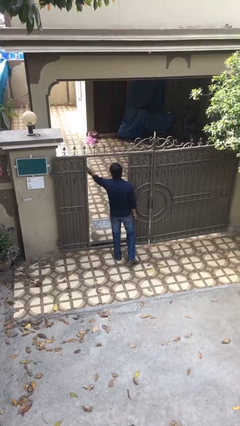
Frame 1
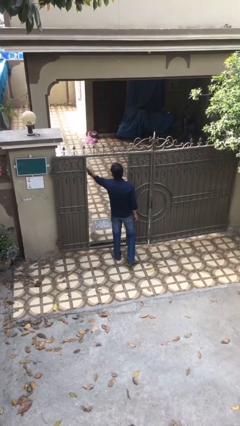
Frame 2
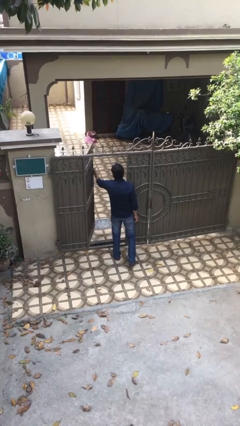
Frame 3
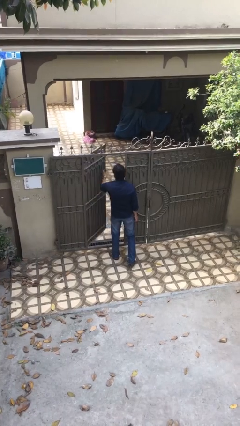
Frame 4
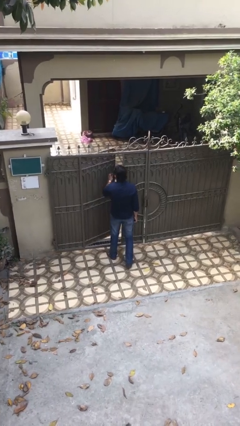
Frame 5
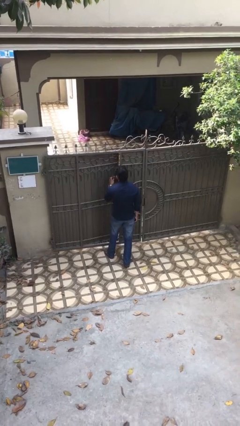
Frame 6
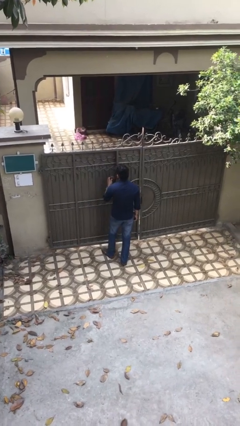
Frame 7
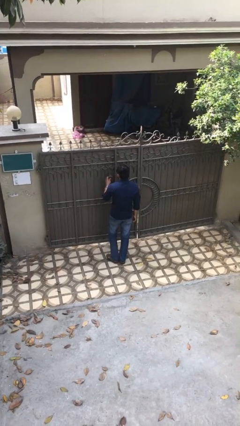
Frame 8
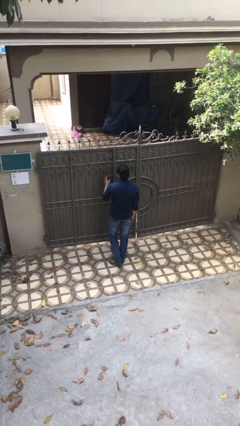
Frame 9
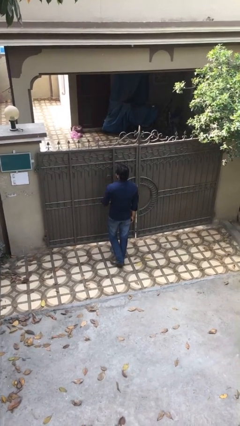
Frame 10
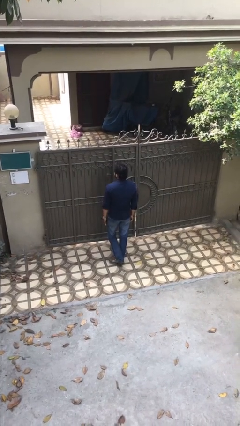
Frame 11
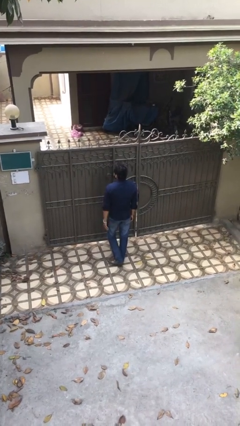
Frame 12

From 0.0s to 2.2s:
person closes facility door

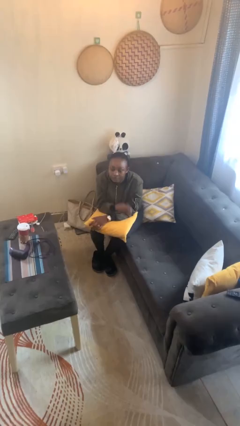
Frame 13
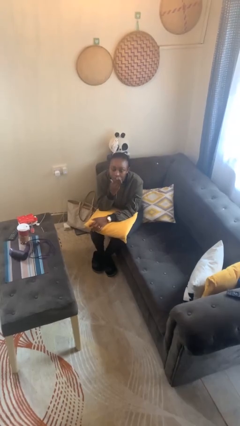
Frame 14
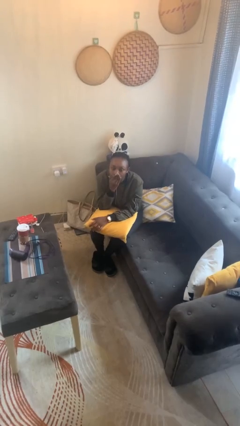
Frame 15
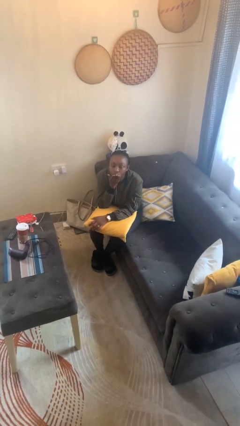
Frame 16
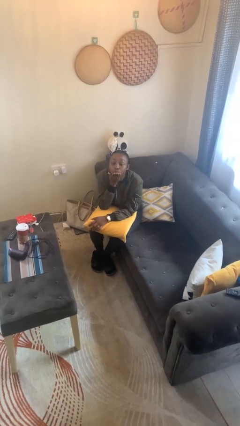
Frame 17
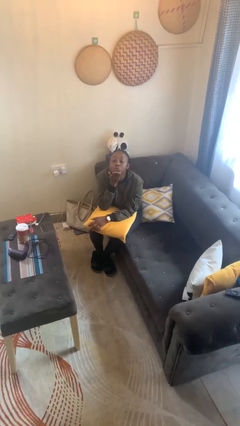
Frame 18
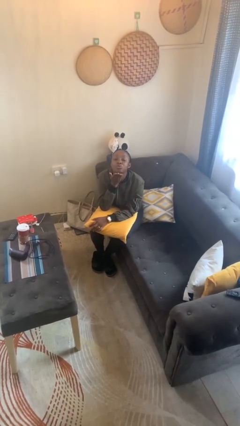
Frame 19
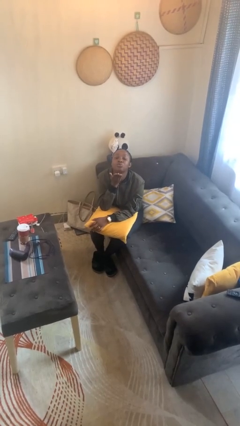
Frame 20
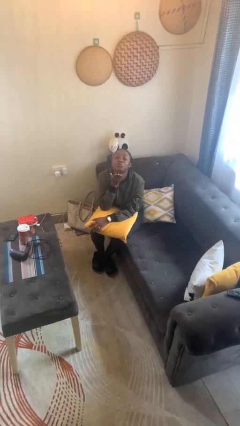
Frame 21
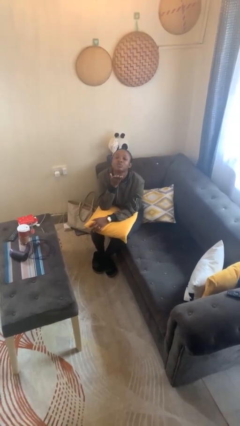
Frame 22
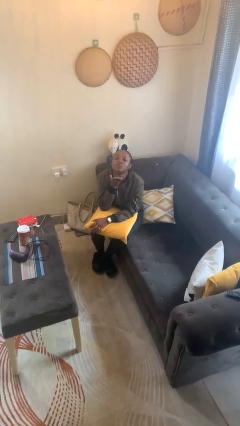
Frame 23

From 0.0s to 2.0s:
person gestures blow kiss

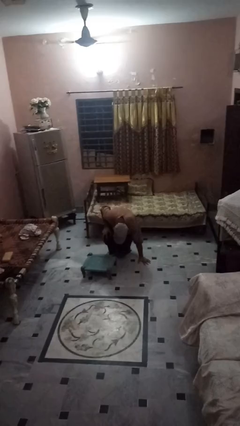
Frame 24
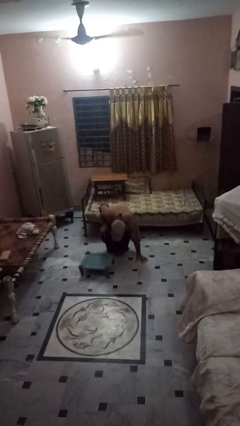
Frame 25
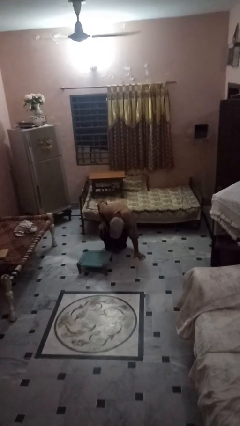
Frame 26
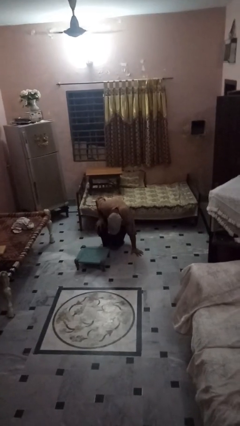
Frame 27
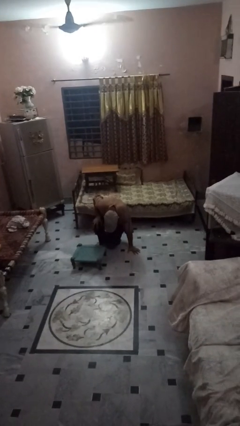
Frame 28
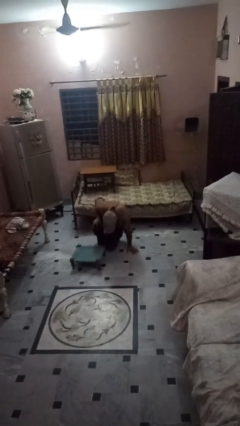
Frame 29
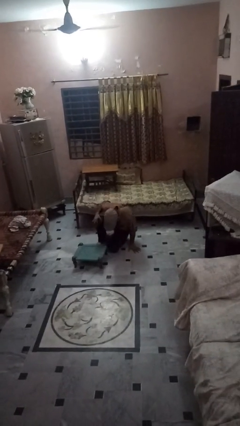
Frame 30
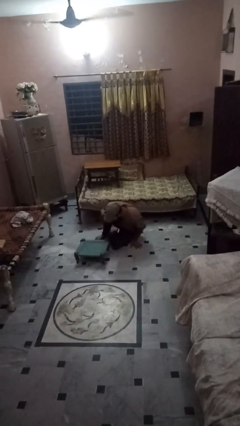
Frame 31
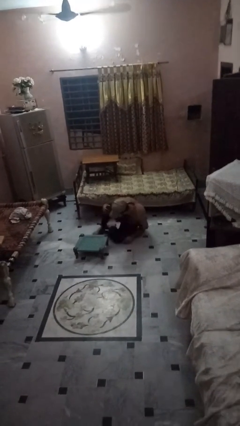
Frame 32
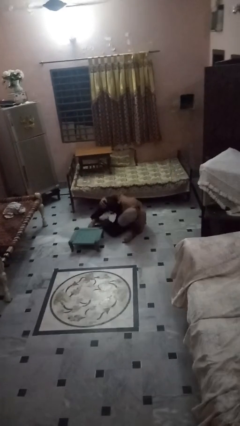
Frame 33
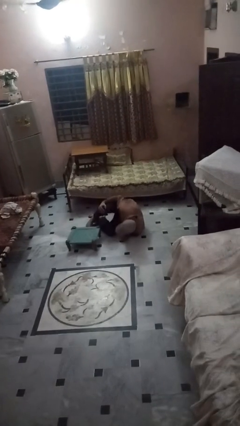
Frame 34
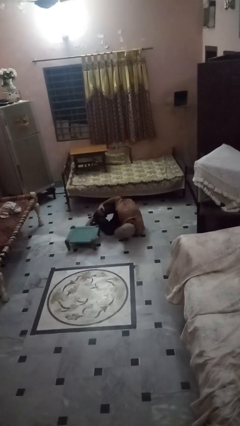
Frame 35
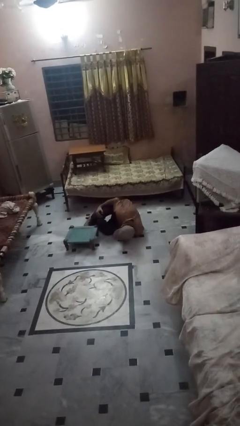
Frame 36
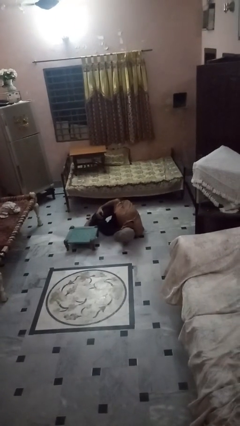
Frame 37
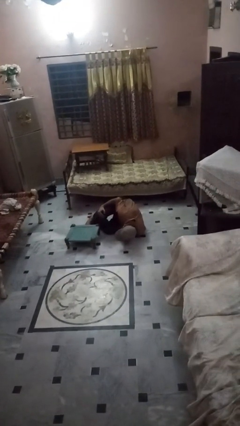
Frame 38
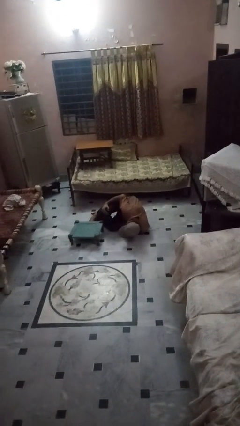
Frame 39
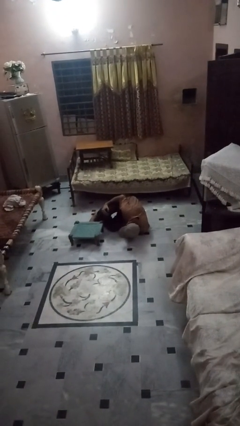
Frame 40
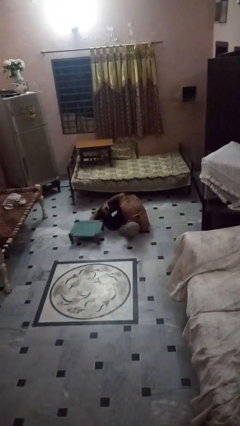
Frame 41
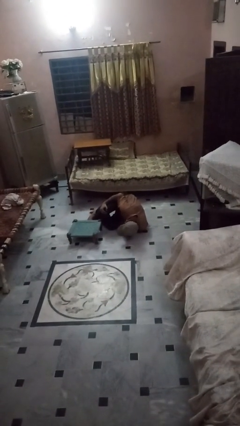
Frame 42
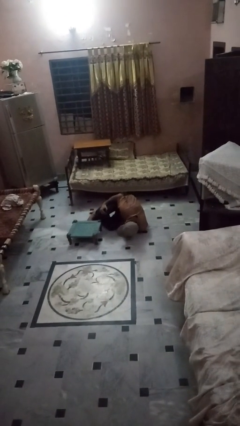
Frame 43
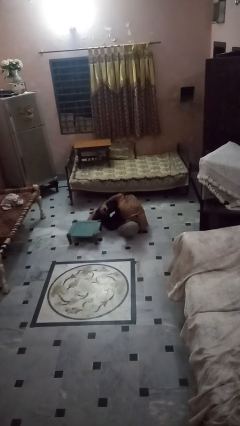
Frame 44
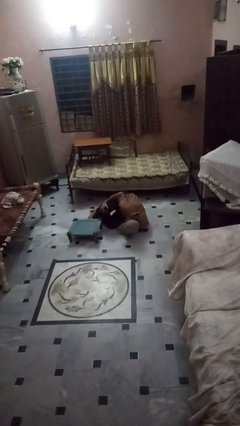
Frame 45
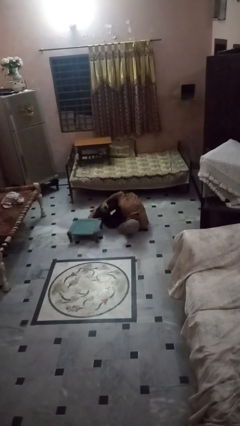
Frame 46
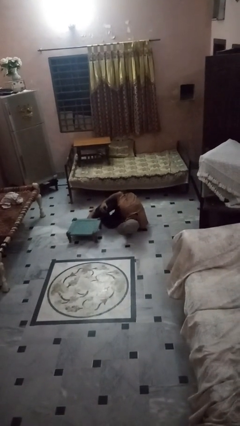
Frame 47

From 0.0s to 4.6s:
person lies down on floor

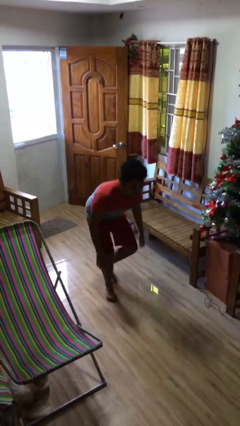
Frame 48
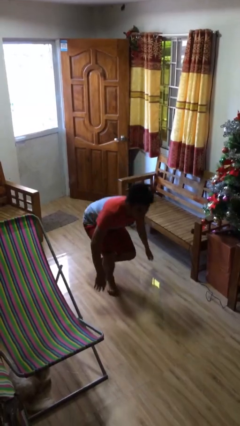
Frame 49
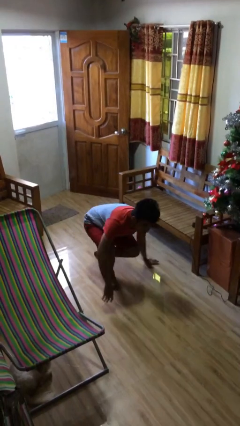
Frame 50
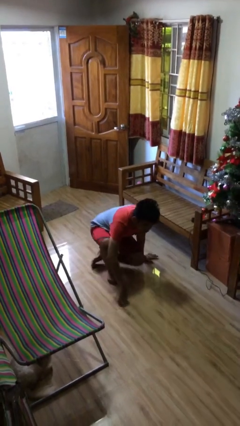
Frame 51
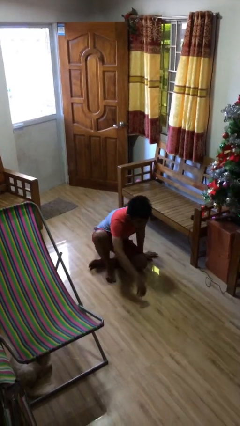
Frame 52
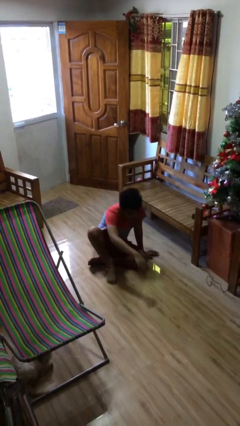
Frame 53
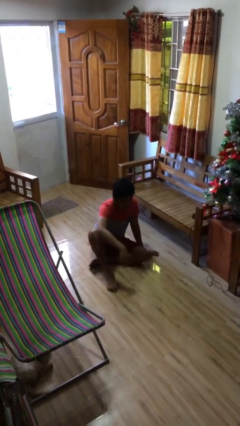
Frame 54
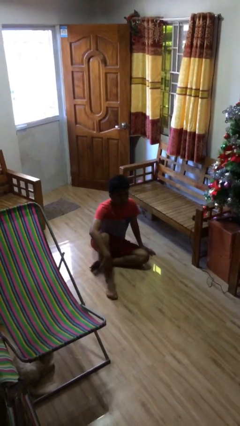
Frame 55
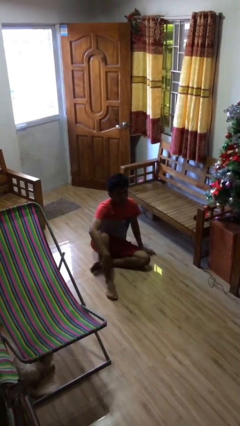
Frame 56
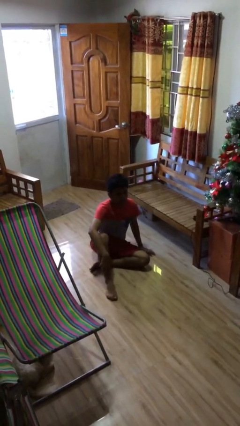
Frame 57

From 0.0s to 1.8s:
person sits down

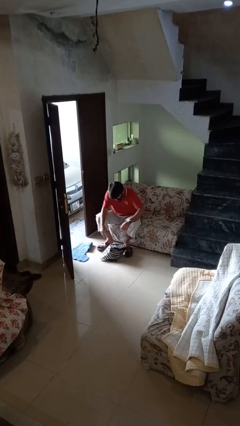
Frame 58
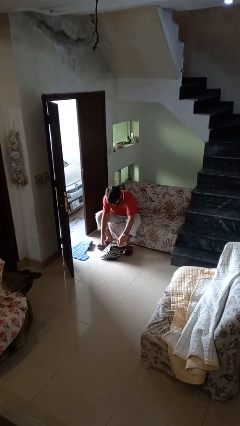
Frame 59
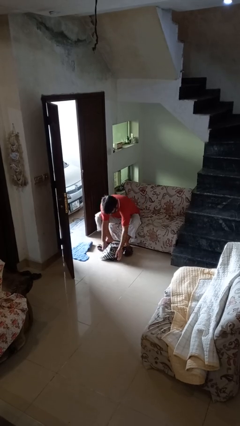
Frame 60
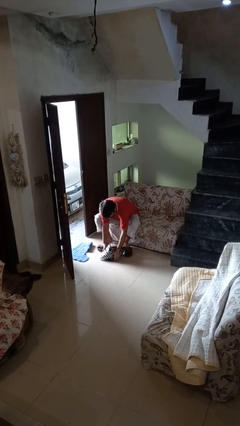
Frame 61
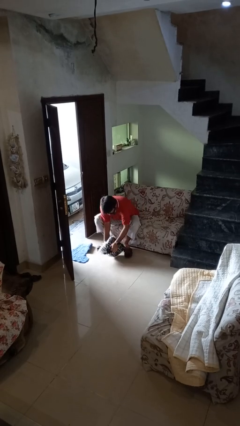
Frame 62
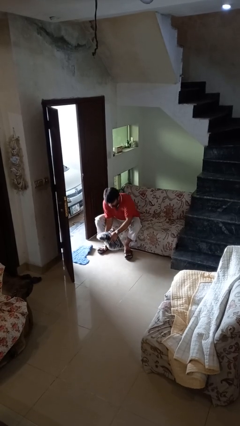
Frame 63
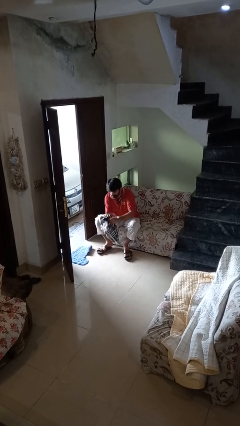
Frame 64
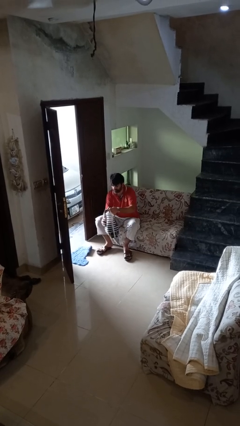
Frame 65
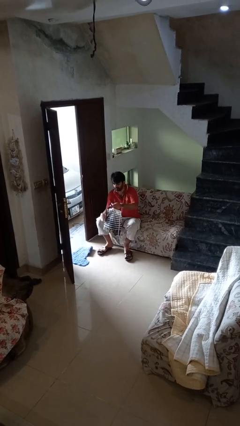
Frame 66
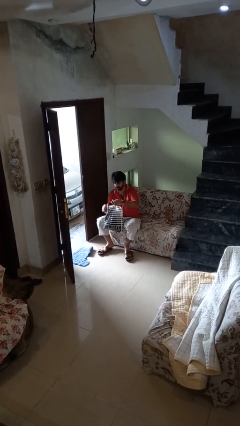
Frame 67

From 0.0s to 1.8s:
person picks up object from floor

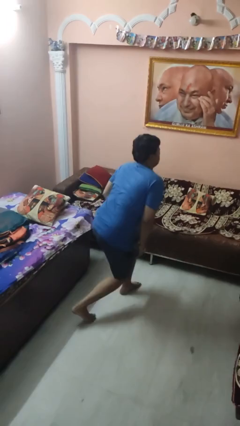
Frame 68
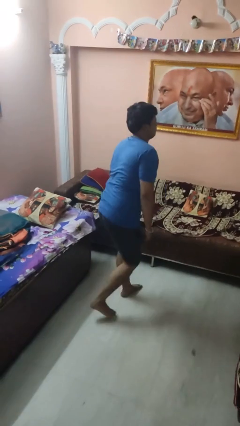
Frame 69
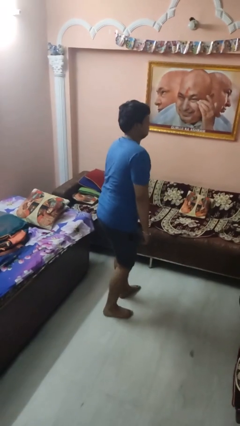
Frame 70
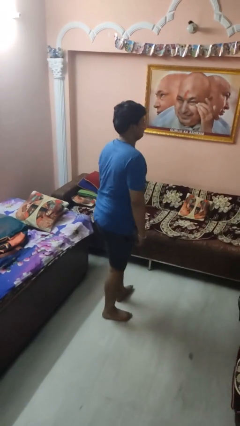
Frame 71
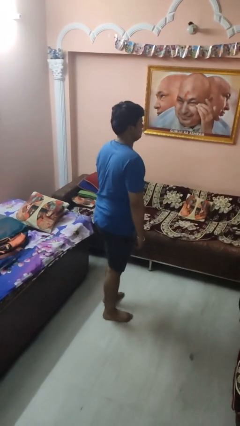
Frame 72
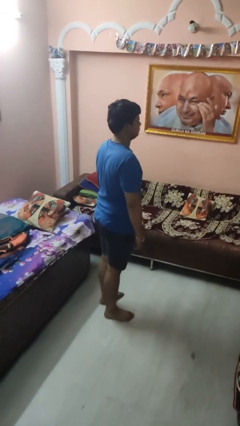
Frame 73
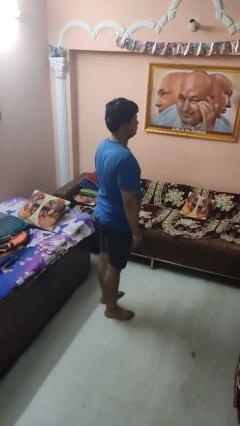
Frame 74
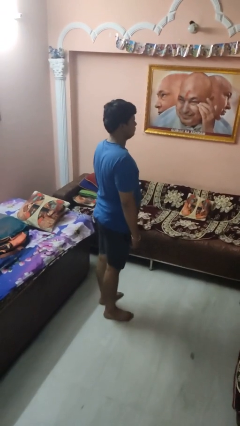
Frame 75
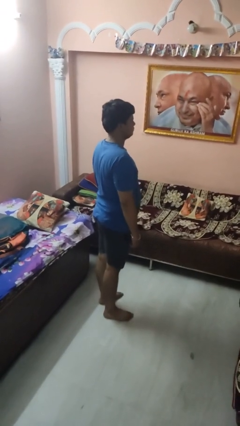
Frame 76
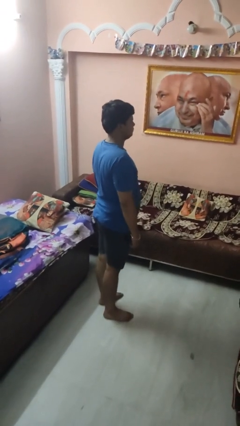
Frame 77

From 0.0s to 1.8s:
person stands up from floor

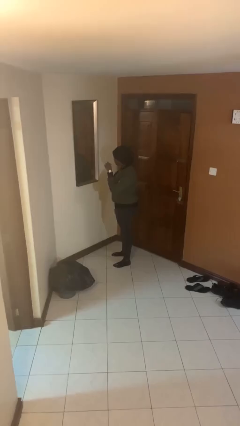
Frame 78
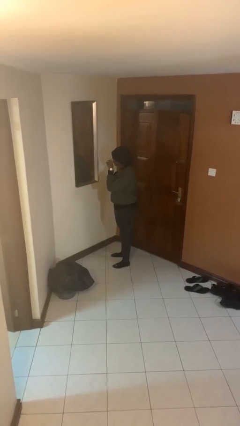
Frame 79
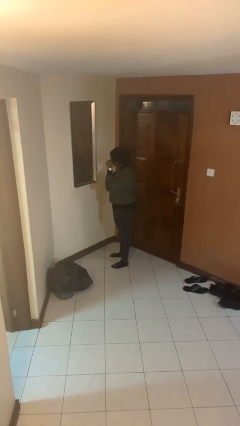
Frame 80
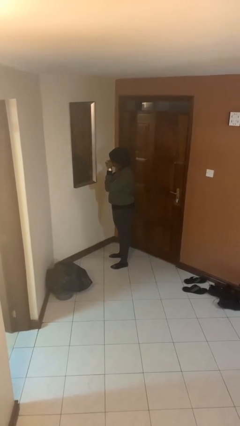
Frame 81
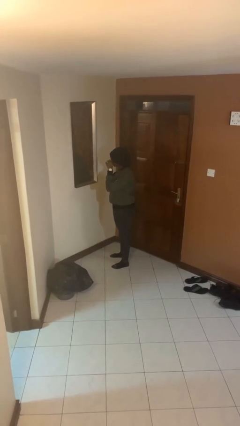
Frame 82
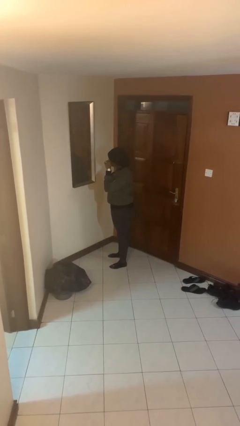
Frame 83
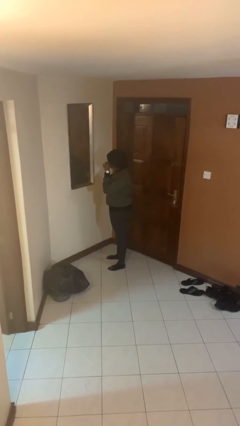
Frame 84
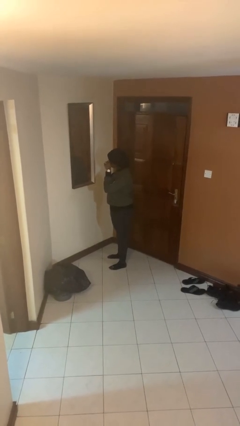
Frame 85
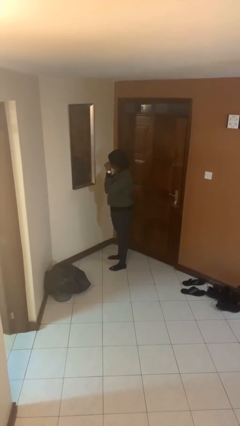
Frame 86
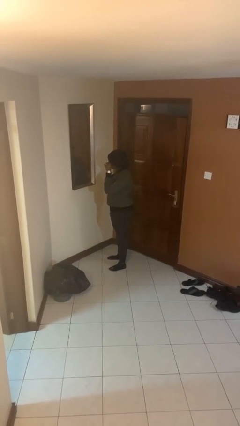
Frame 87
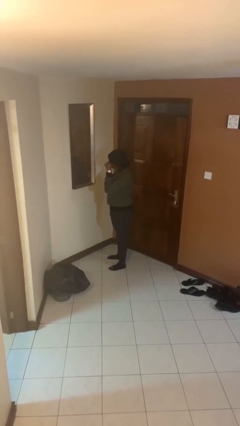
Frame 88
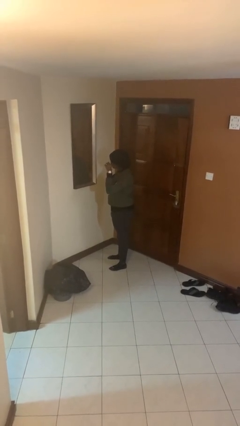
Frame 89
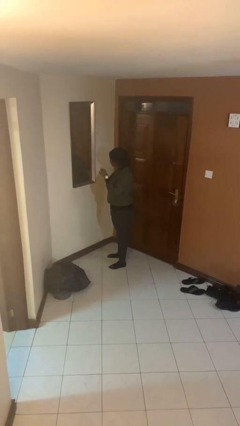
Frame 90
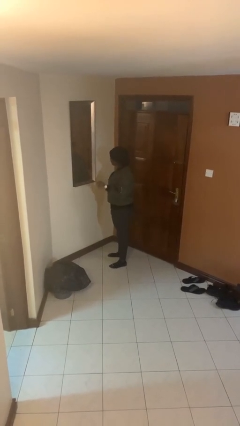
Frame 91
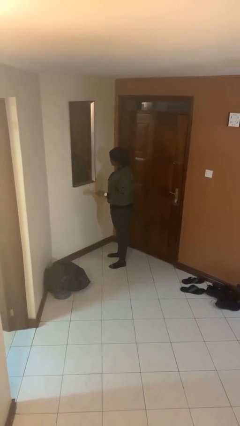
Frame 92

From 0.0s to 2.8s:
person applies eye makeup
